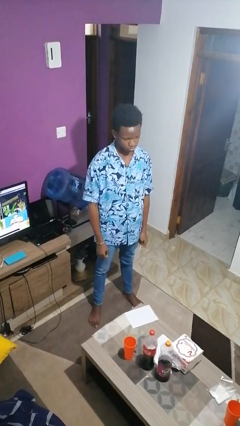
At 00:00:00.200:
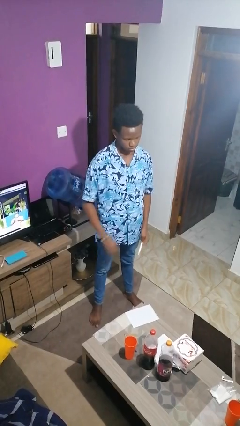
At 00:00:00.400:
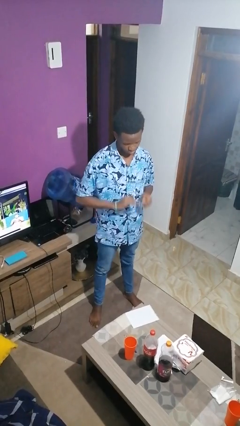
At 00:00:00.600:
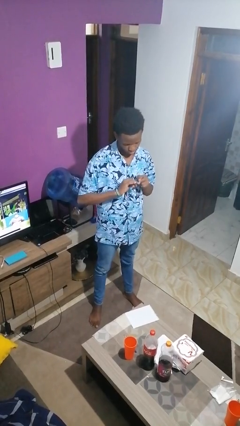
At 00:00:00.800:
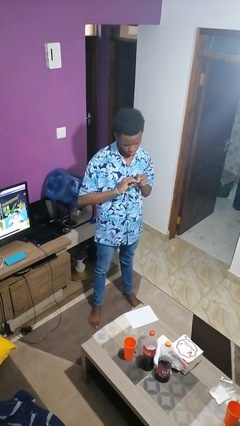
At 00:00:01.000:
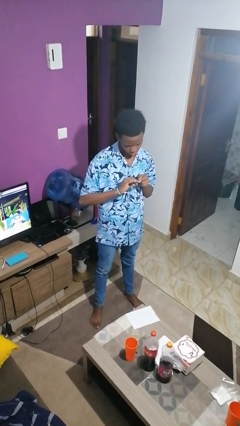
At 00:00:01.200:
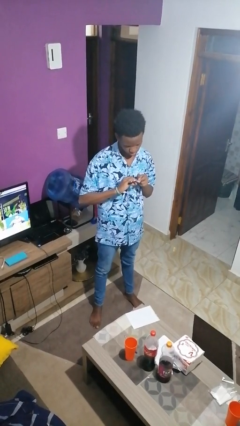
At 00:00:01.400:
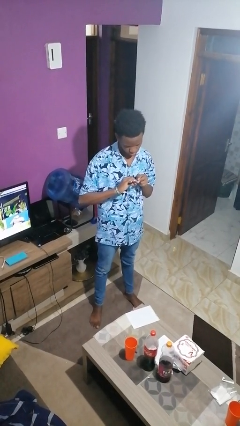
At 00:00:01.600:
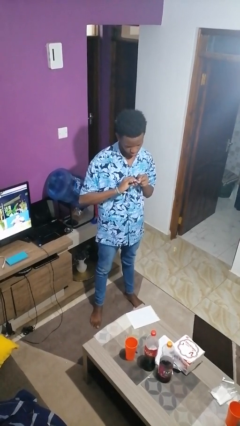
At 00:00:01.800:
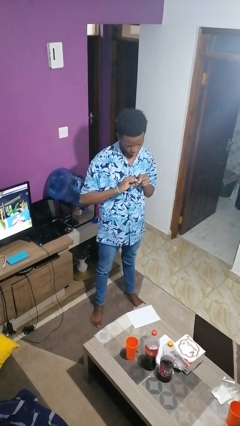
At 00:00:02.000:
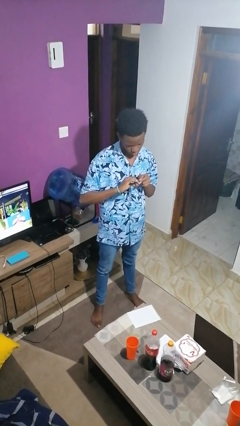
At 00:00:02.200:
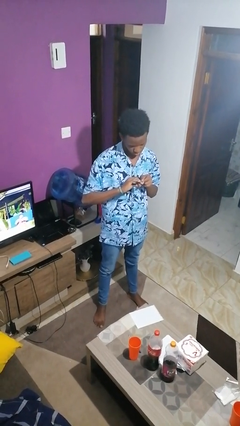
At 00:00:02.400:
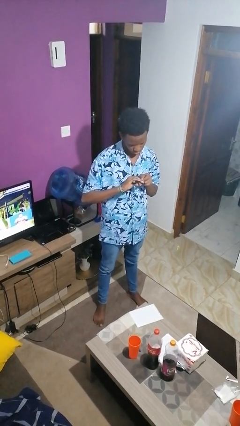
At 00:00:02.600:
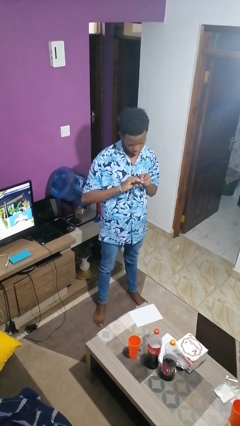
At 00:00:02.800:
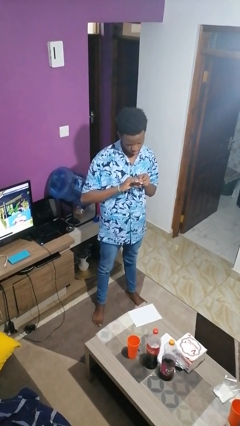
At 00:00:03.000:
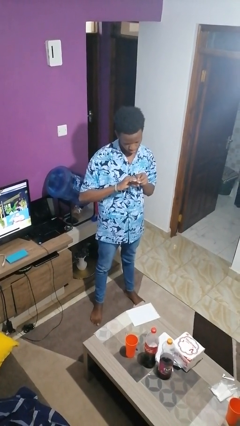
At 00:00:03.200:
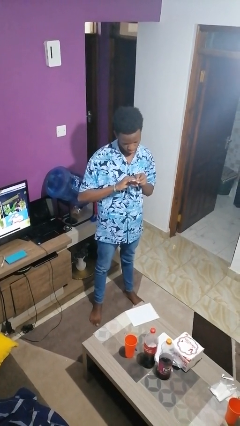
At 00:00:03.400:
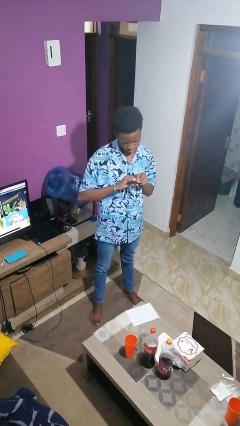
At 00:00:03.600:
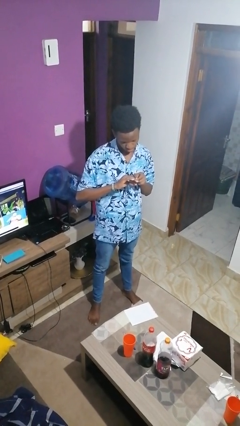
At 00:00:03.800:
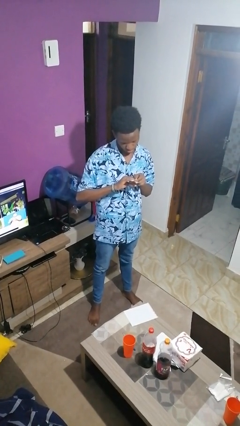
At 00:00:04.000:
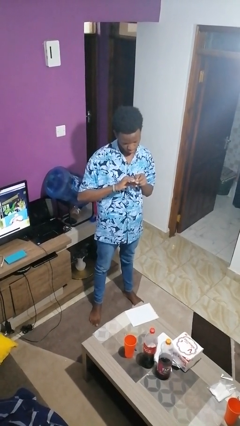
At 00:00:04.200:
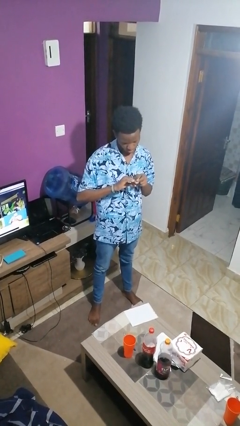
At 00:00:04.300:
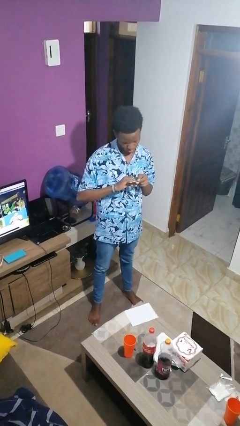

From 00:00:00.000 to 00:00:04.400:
person files fingernails

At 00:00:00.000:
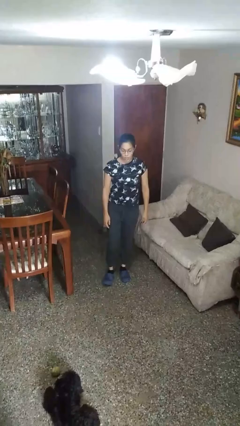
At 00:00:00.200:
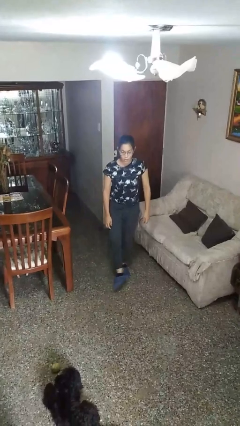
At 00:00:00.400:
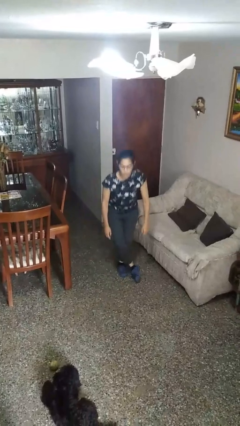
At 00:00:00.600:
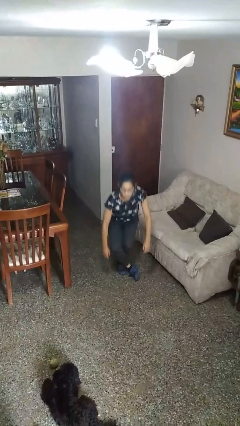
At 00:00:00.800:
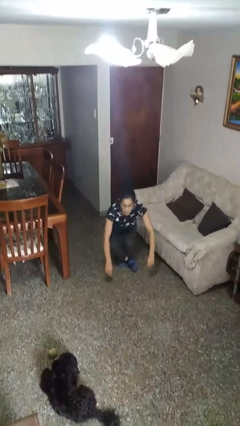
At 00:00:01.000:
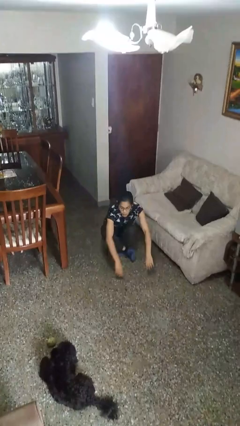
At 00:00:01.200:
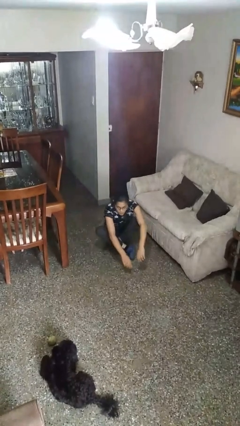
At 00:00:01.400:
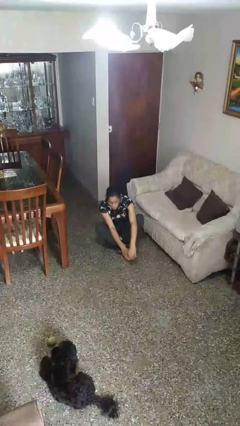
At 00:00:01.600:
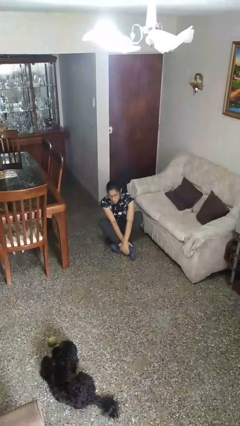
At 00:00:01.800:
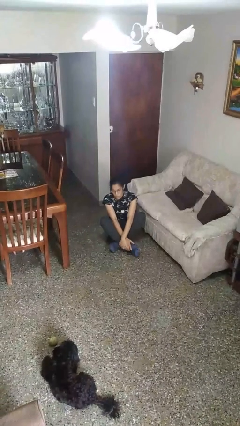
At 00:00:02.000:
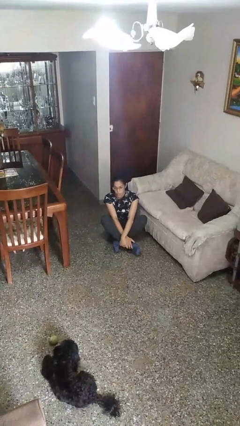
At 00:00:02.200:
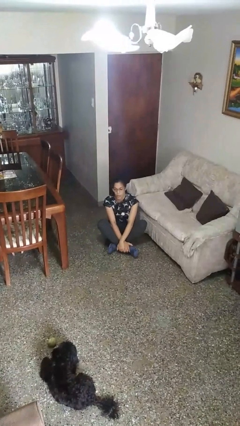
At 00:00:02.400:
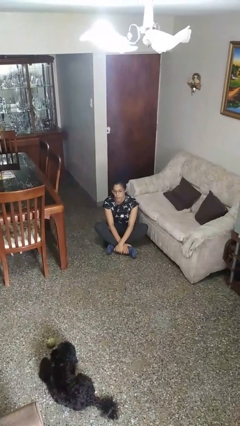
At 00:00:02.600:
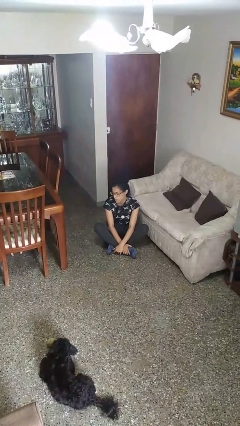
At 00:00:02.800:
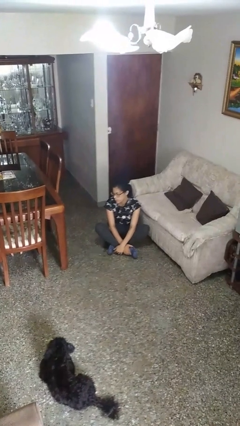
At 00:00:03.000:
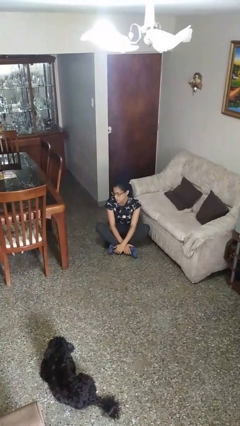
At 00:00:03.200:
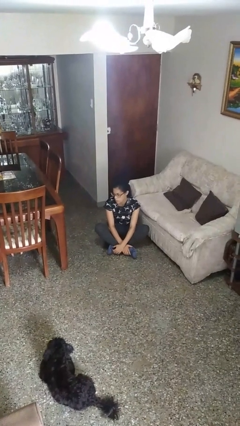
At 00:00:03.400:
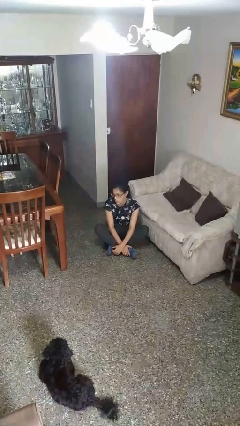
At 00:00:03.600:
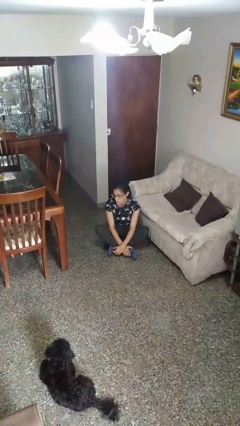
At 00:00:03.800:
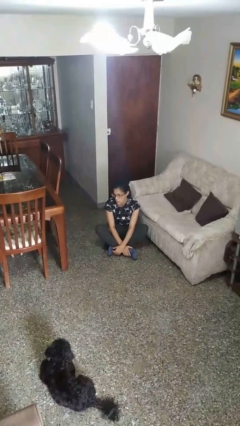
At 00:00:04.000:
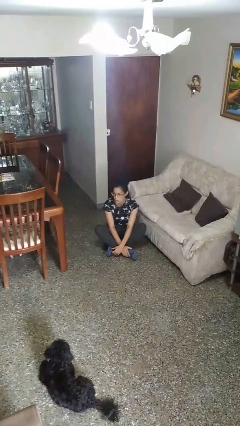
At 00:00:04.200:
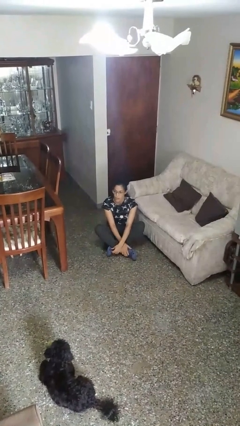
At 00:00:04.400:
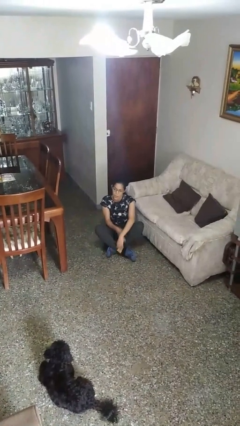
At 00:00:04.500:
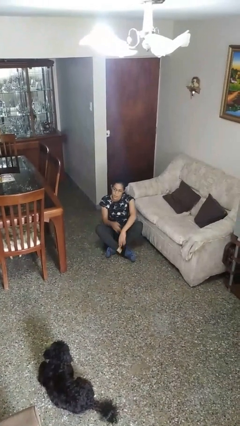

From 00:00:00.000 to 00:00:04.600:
person sits crisscross

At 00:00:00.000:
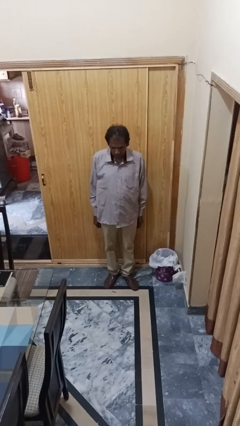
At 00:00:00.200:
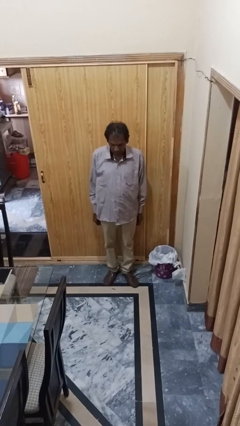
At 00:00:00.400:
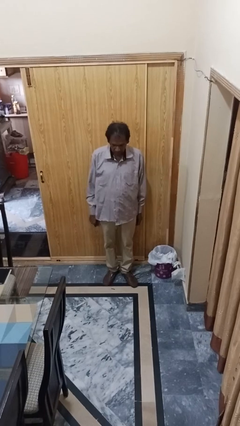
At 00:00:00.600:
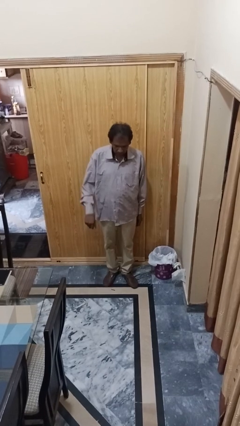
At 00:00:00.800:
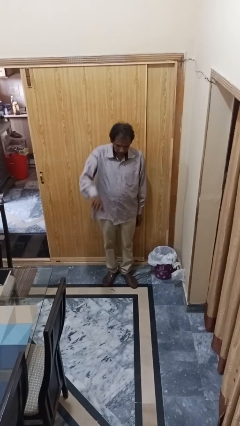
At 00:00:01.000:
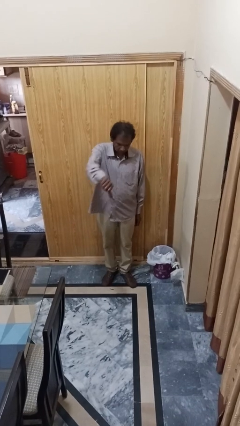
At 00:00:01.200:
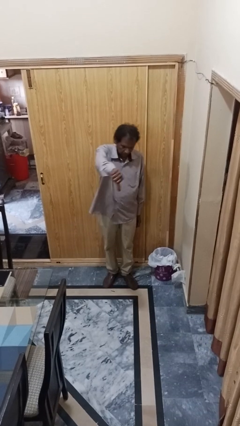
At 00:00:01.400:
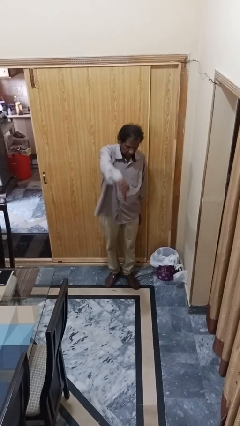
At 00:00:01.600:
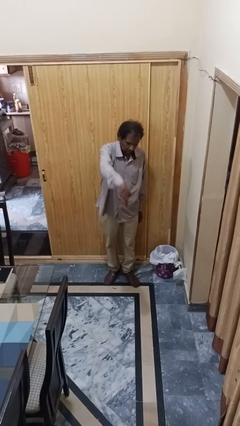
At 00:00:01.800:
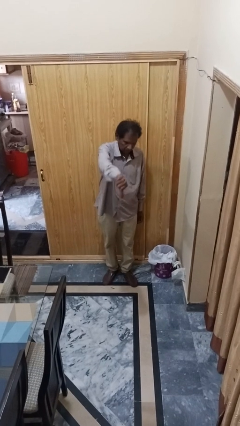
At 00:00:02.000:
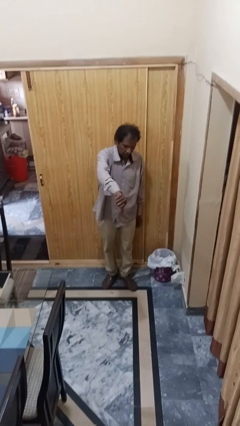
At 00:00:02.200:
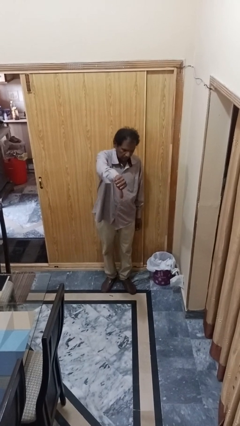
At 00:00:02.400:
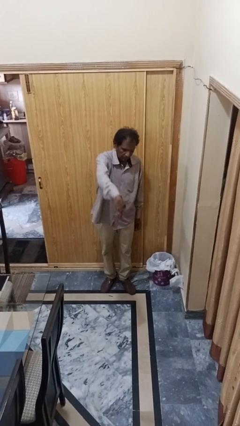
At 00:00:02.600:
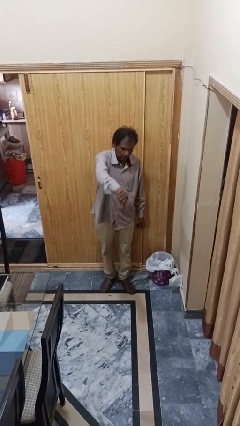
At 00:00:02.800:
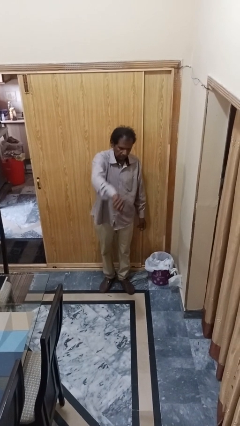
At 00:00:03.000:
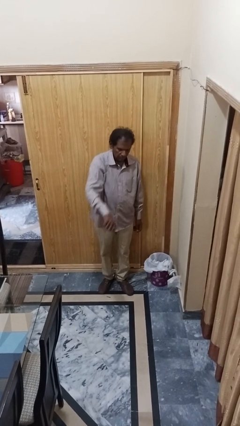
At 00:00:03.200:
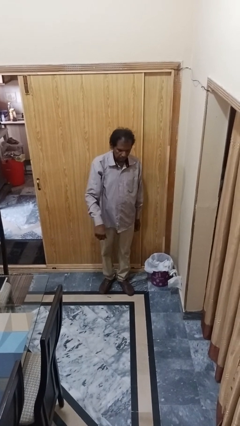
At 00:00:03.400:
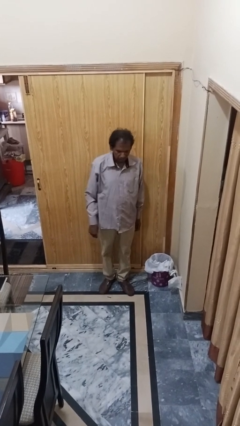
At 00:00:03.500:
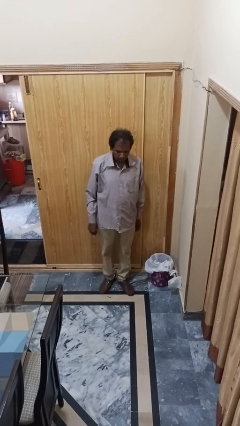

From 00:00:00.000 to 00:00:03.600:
person gestures thumbs down

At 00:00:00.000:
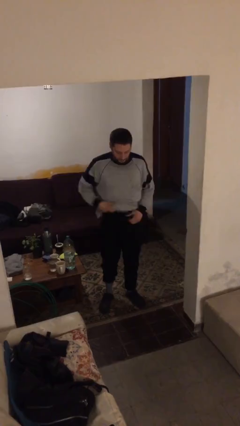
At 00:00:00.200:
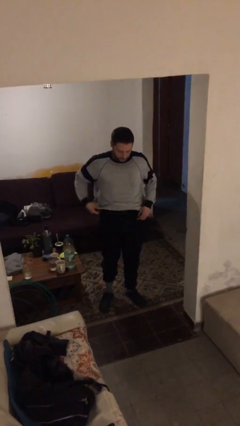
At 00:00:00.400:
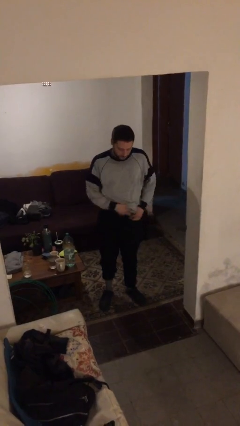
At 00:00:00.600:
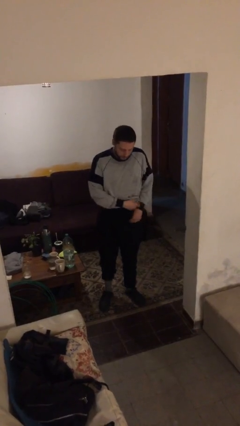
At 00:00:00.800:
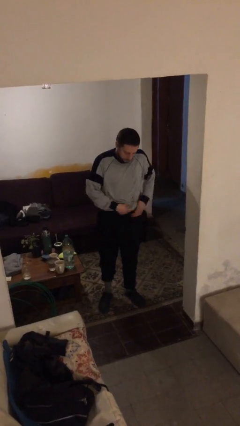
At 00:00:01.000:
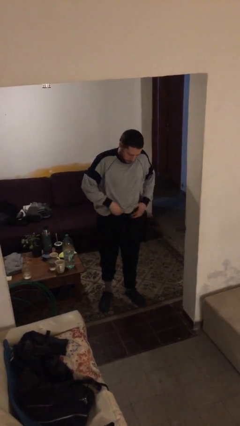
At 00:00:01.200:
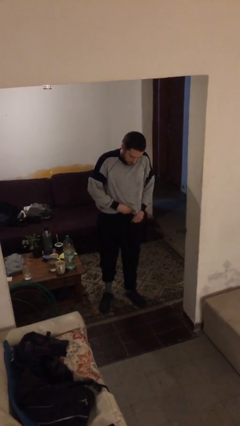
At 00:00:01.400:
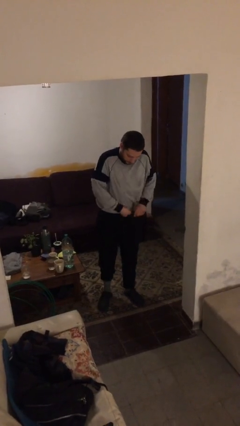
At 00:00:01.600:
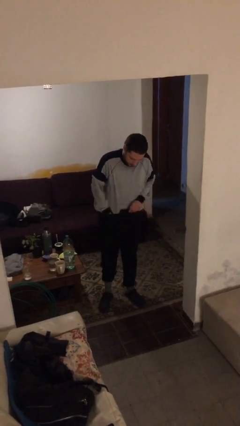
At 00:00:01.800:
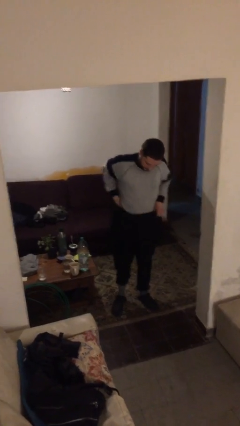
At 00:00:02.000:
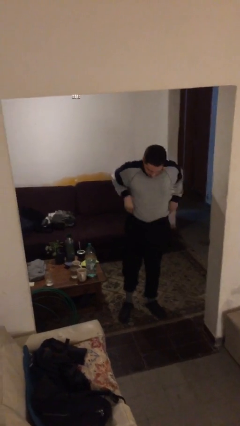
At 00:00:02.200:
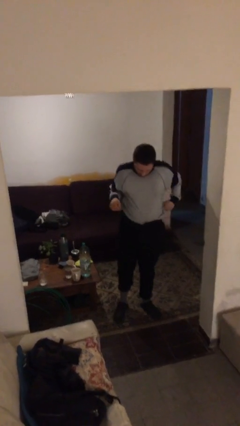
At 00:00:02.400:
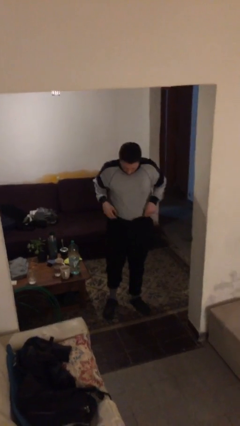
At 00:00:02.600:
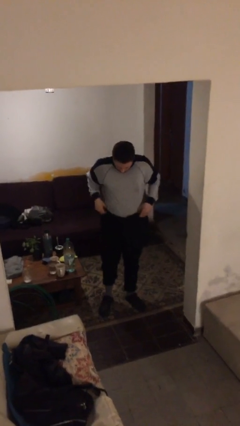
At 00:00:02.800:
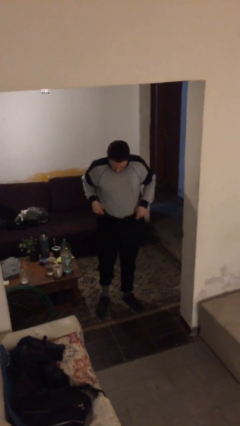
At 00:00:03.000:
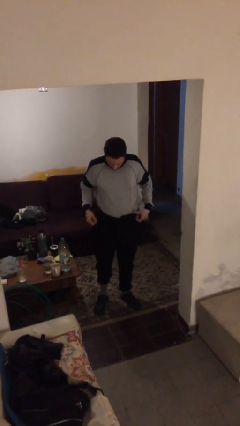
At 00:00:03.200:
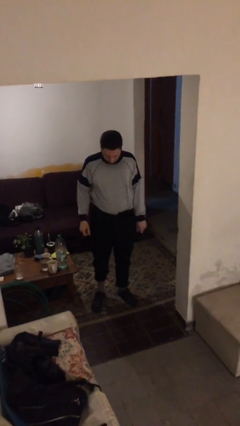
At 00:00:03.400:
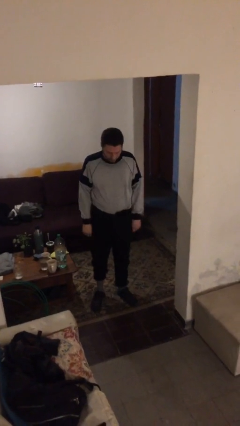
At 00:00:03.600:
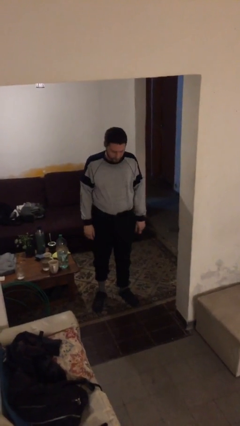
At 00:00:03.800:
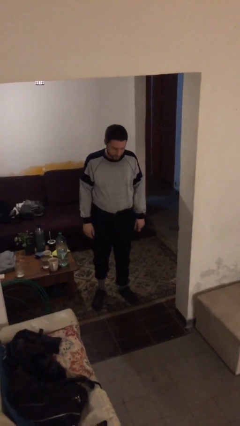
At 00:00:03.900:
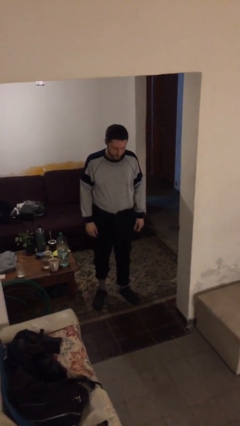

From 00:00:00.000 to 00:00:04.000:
person tucks in shirt

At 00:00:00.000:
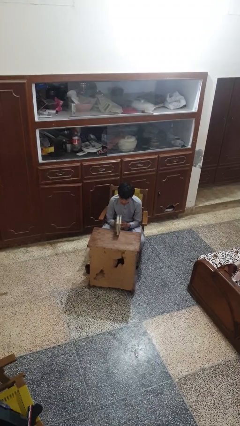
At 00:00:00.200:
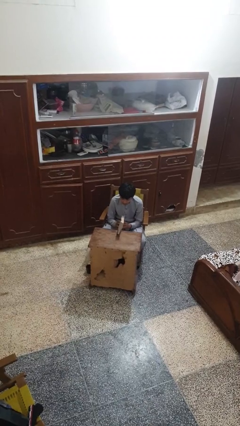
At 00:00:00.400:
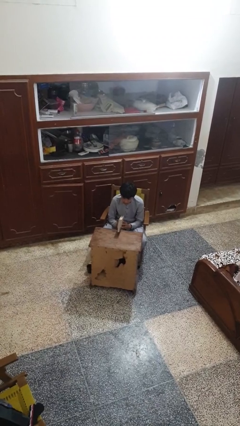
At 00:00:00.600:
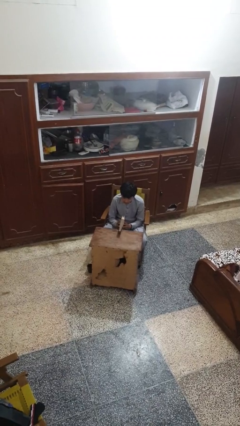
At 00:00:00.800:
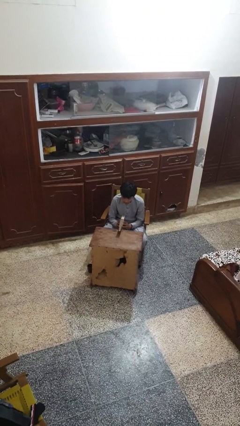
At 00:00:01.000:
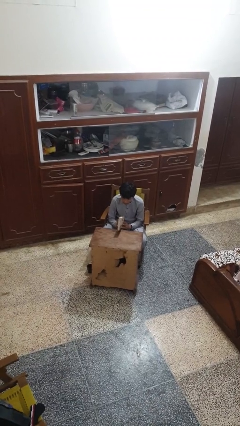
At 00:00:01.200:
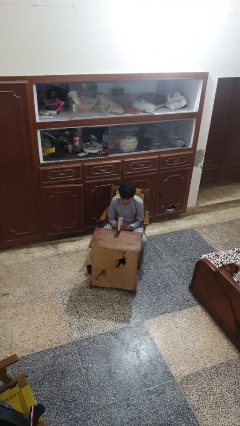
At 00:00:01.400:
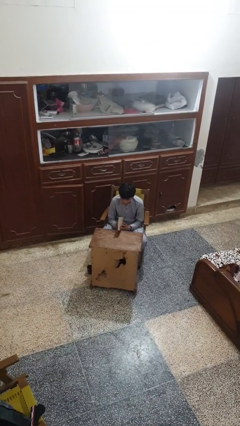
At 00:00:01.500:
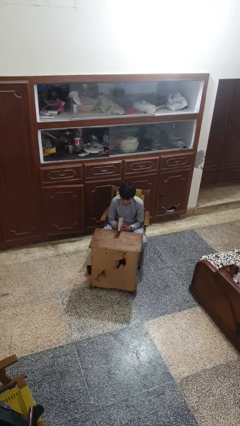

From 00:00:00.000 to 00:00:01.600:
person reads book
